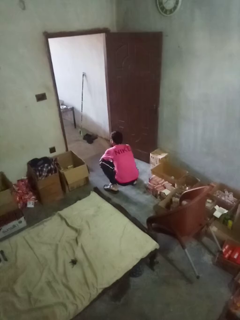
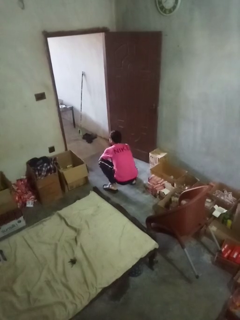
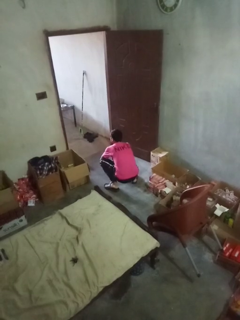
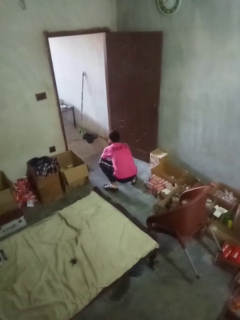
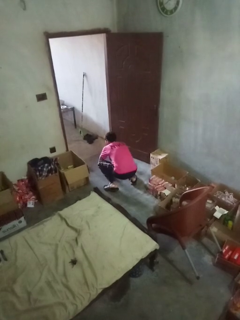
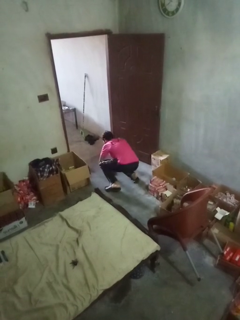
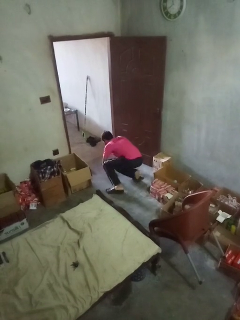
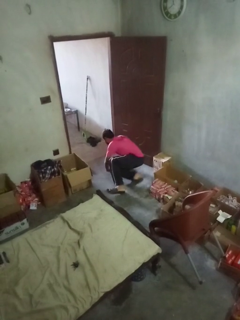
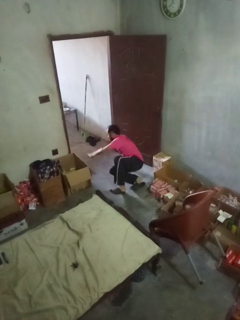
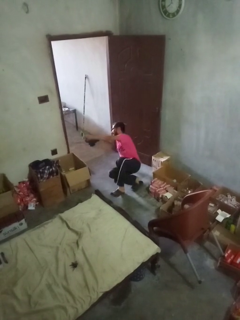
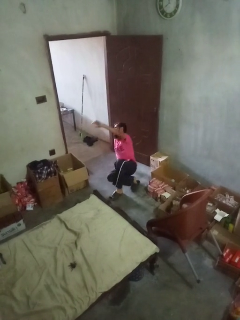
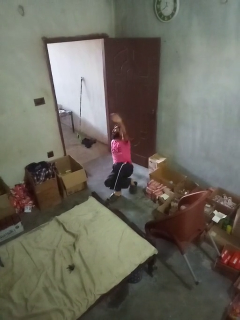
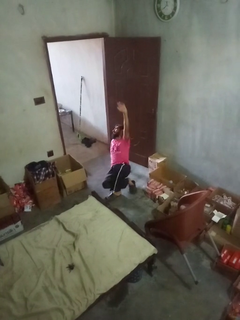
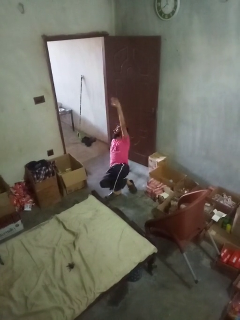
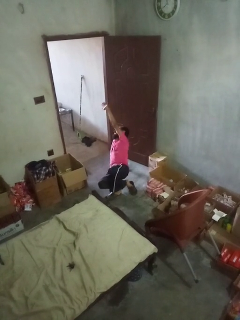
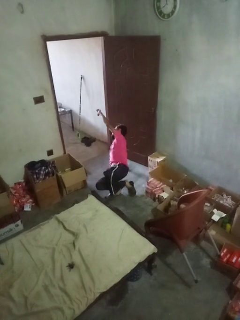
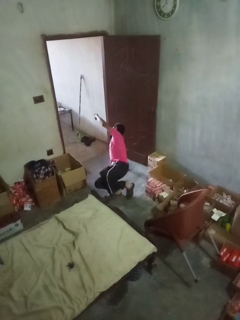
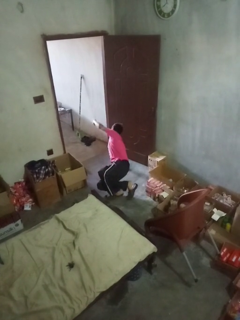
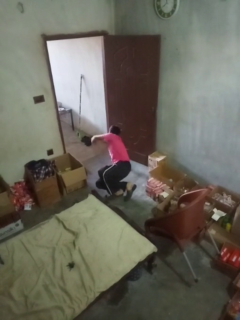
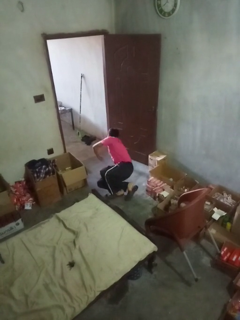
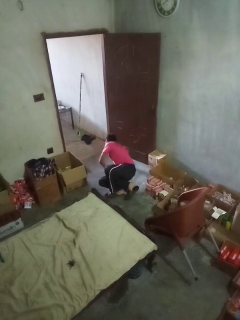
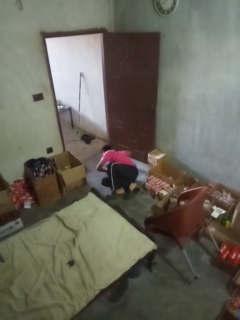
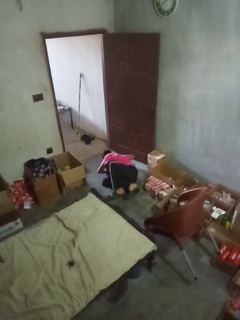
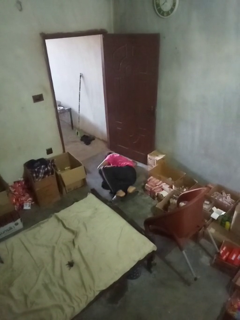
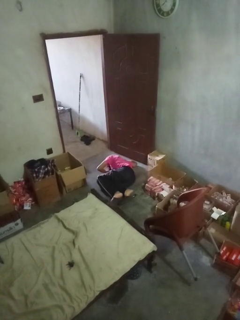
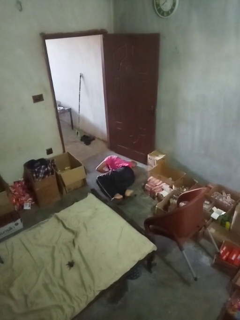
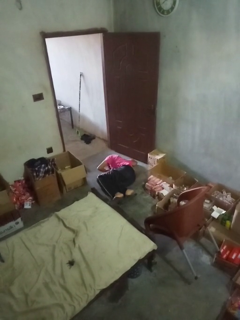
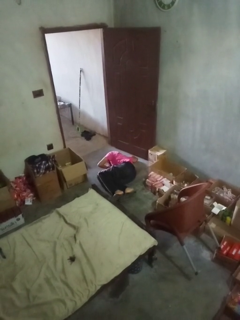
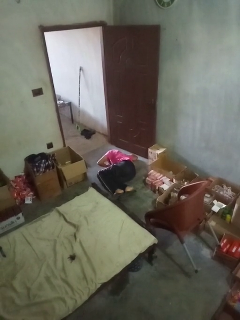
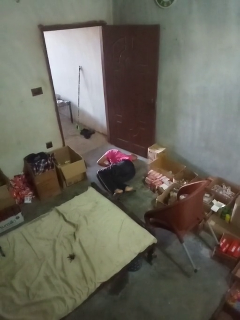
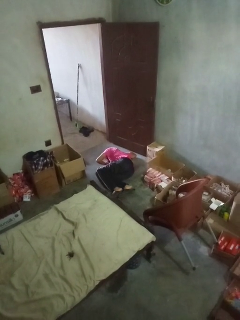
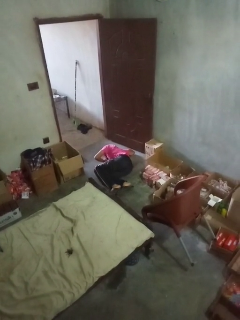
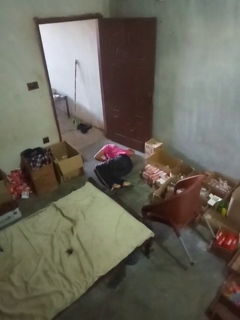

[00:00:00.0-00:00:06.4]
person lies down on floor

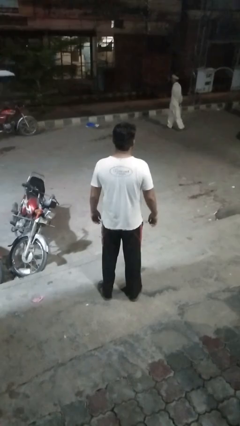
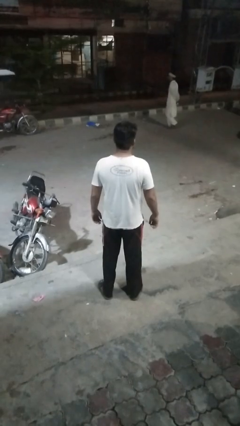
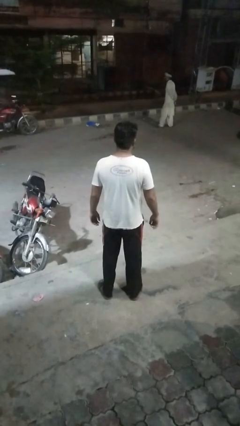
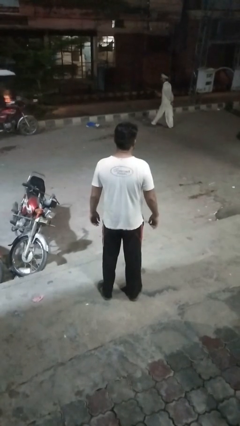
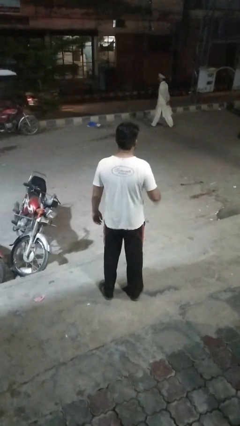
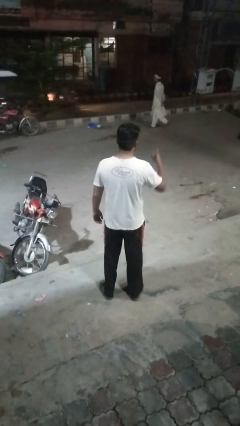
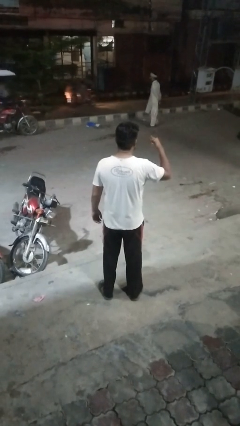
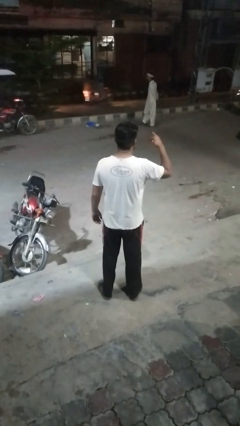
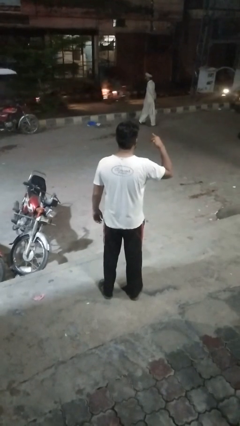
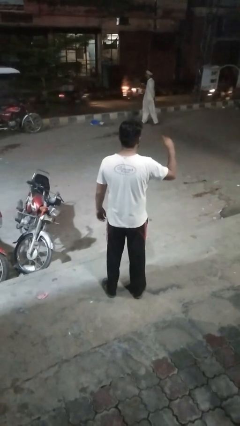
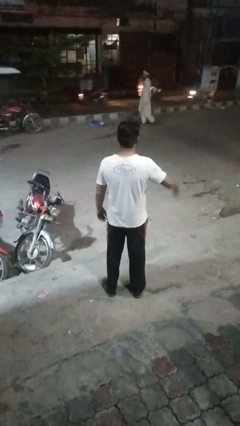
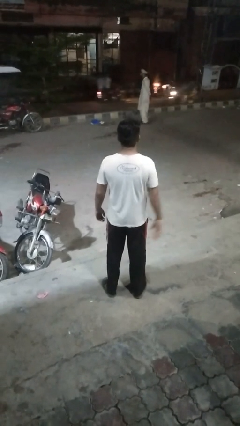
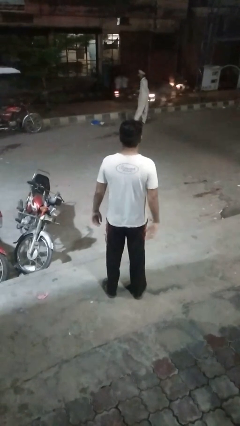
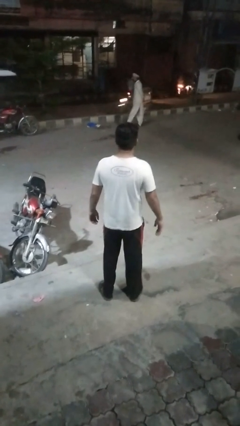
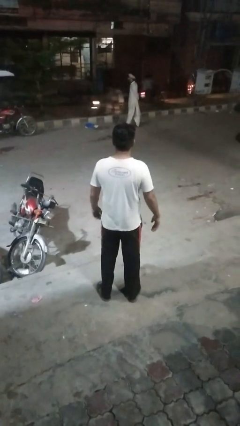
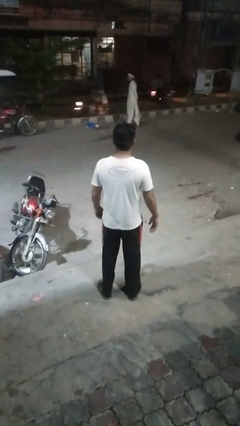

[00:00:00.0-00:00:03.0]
person gestures hang loose

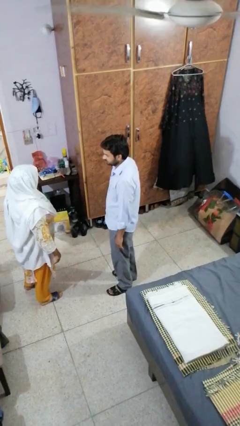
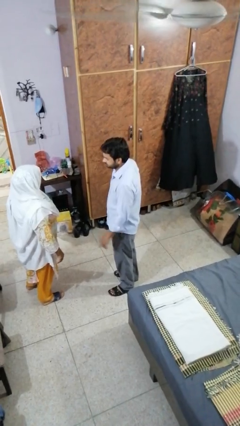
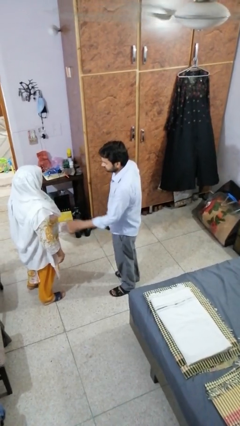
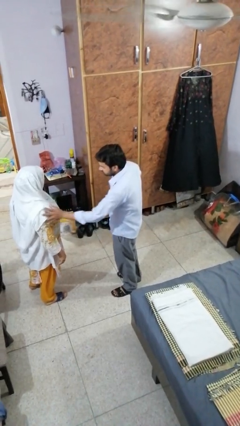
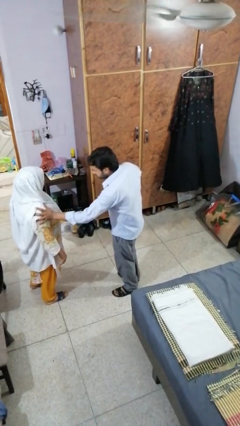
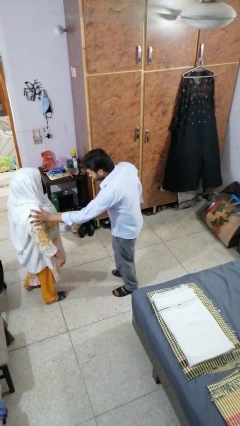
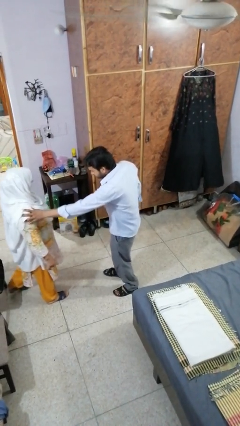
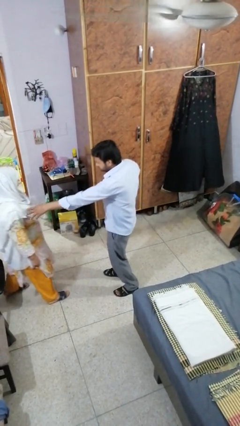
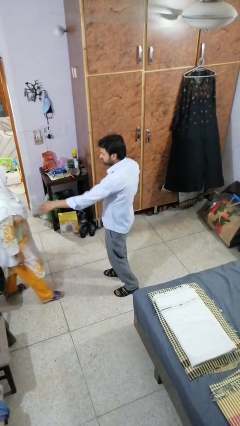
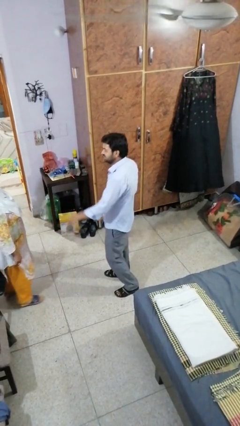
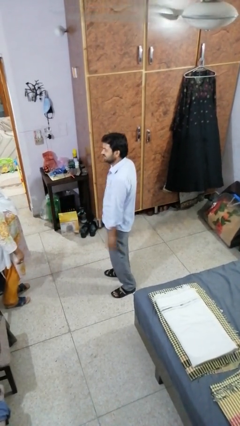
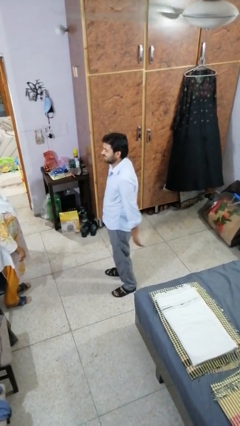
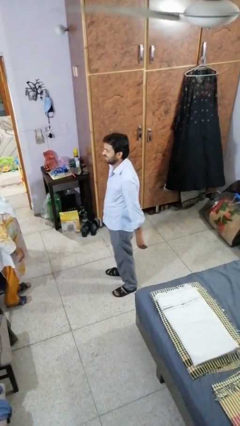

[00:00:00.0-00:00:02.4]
person shoves person

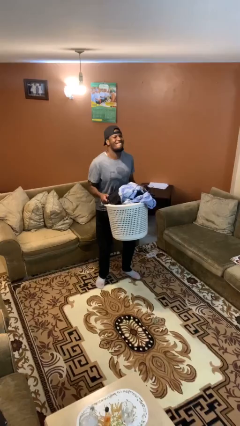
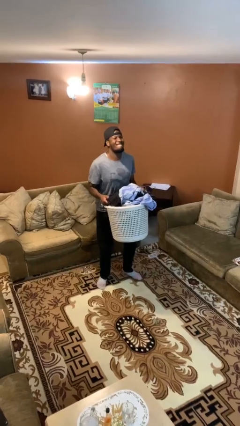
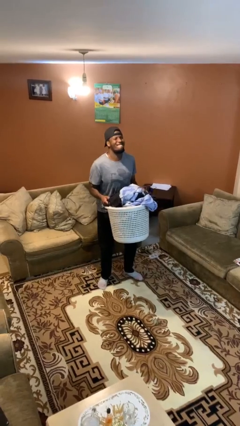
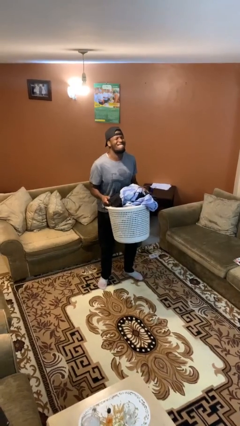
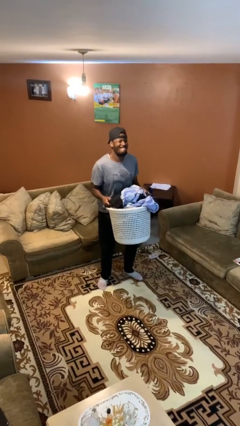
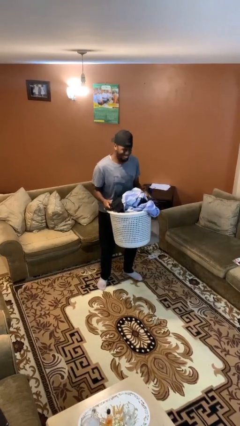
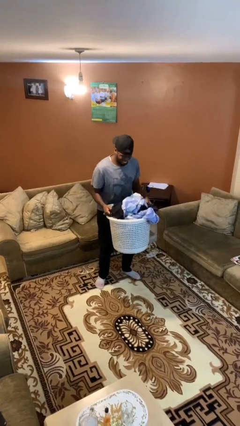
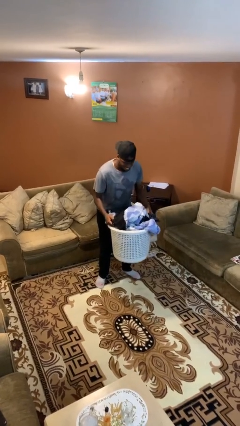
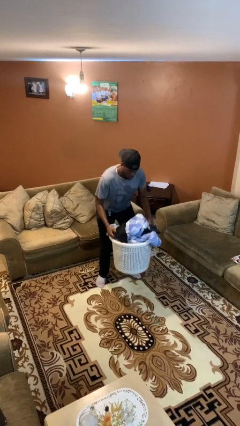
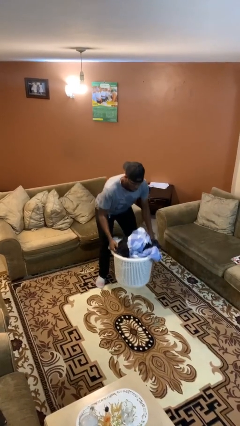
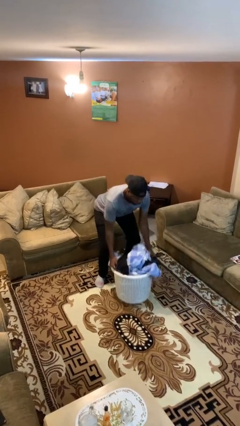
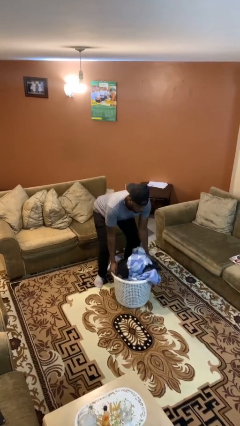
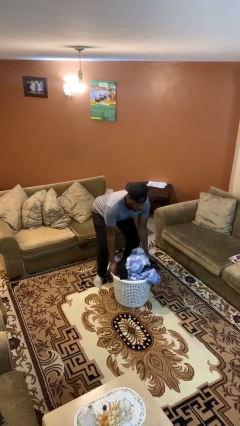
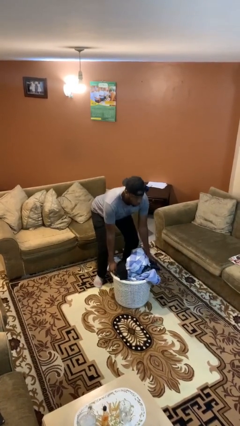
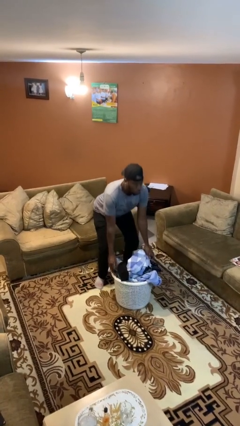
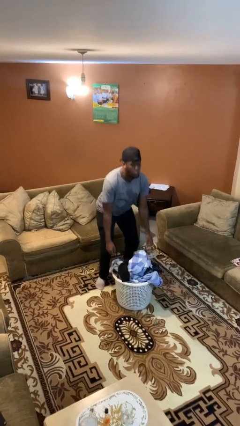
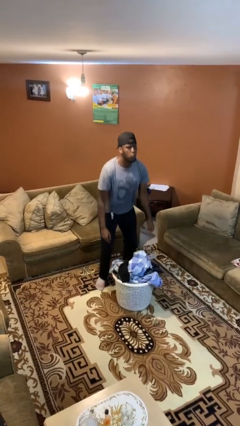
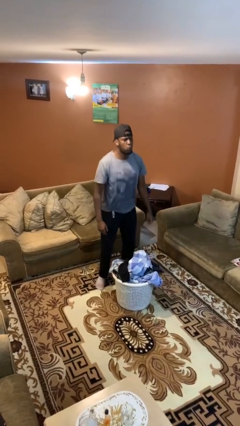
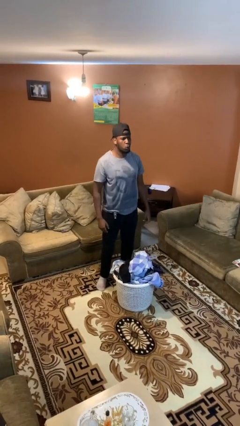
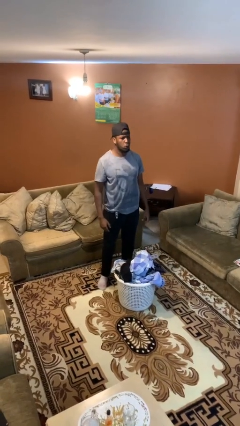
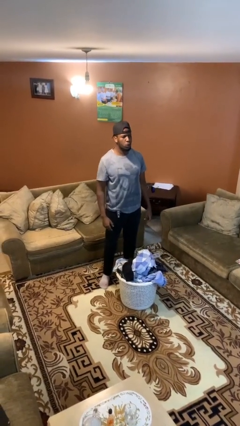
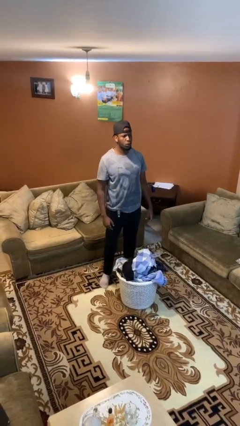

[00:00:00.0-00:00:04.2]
person puts down object on floor

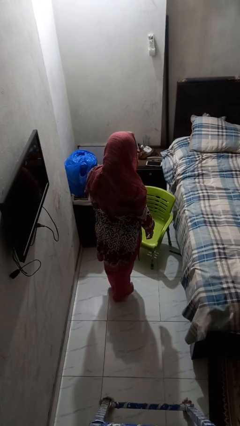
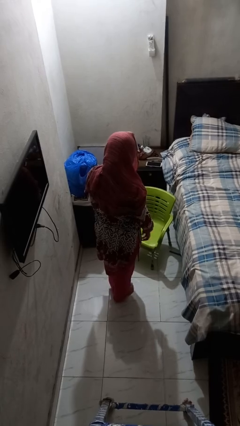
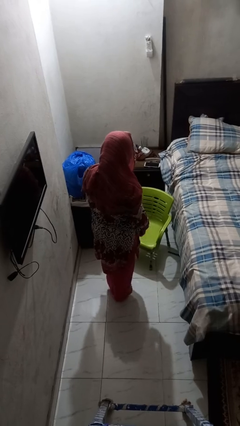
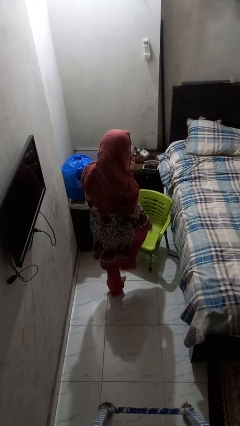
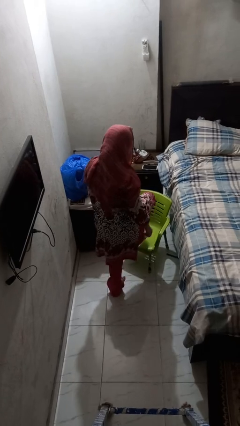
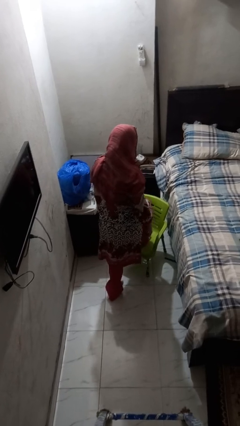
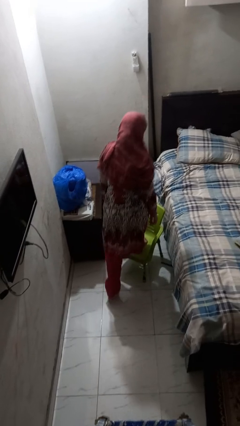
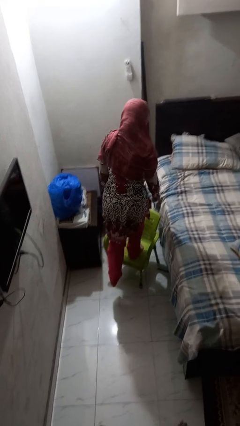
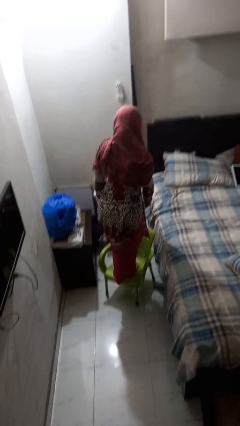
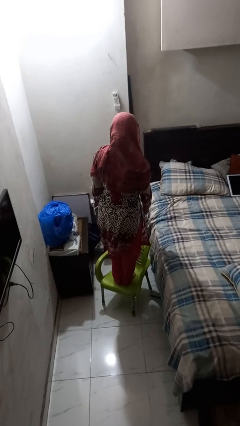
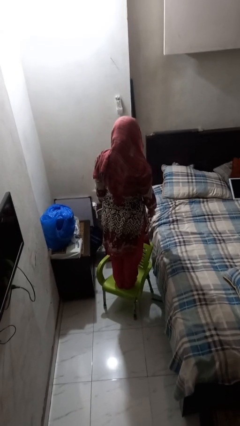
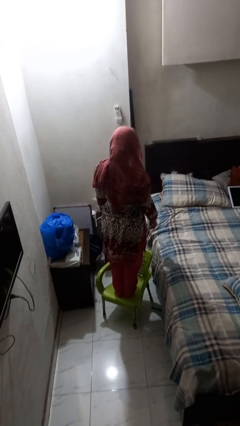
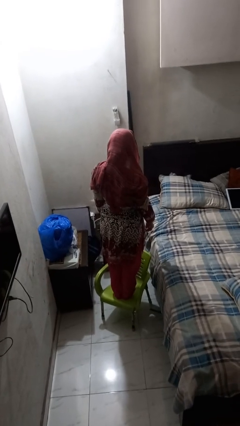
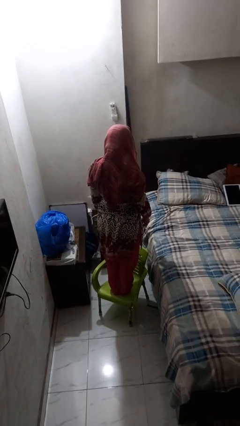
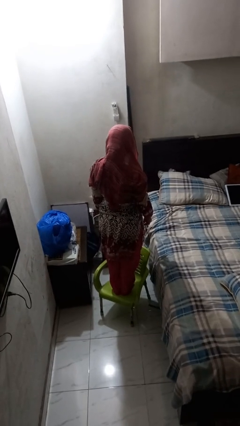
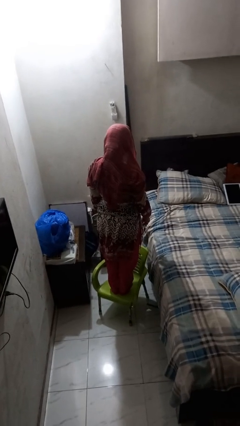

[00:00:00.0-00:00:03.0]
person climbs on chair

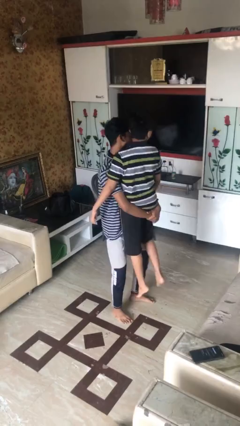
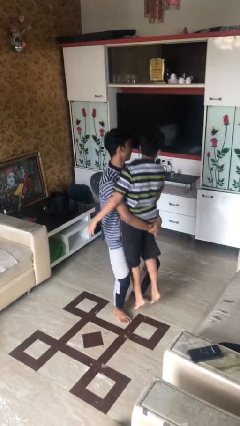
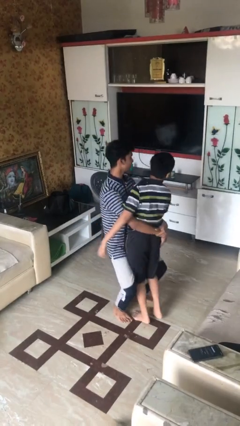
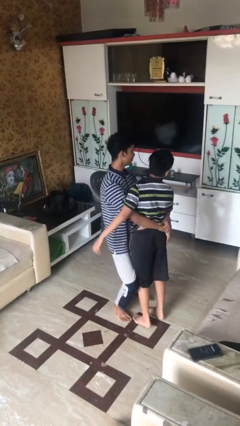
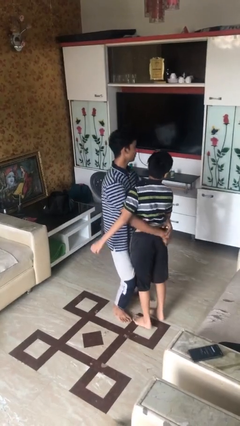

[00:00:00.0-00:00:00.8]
person puts down person
